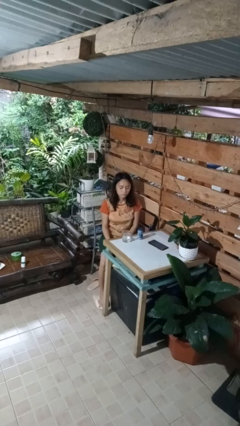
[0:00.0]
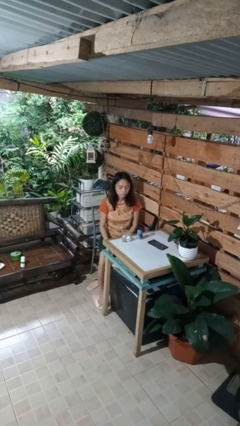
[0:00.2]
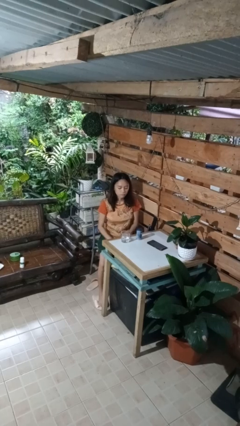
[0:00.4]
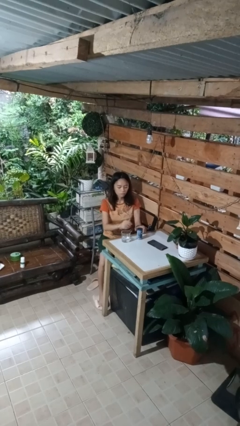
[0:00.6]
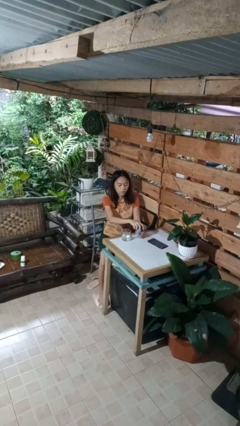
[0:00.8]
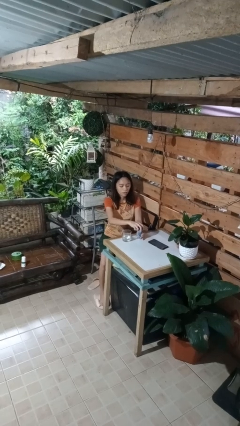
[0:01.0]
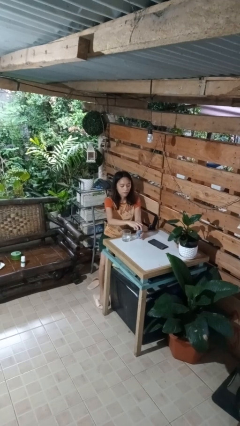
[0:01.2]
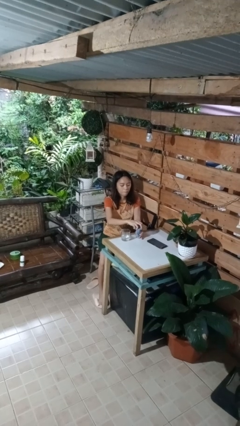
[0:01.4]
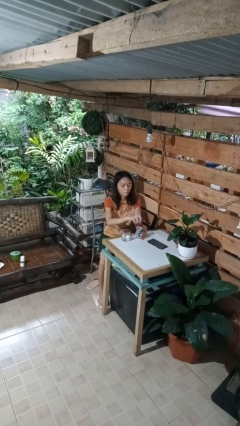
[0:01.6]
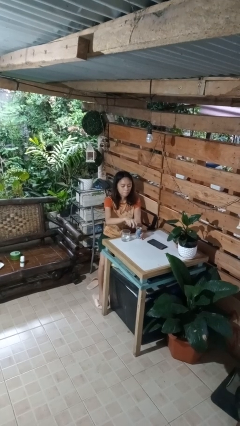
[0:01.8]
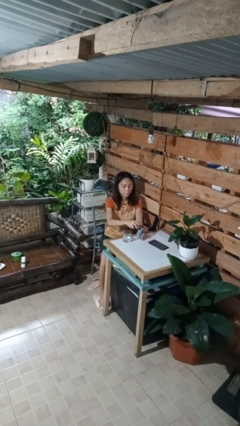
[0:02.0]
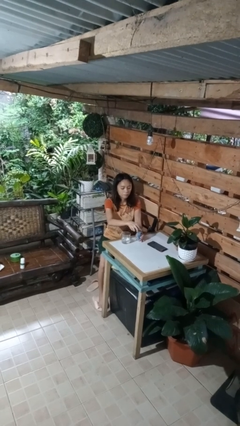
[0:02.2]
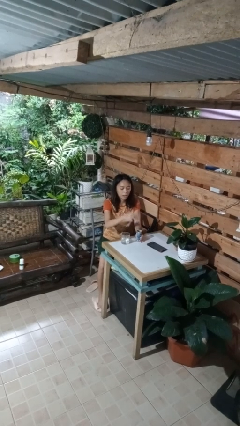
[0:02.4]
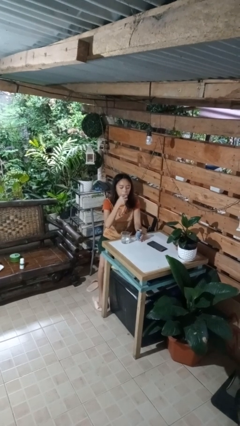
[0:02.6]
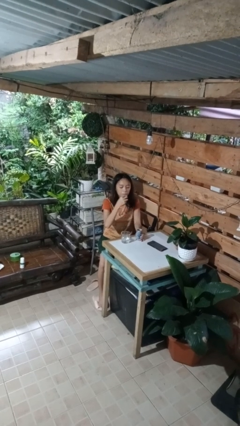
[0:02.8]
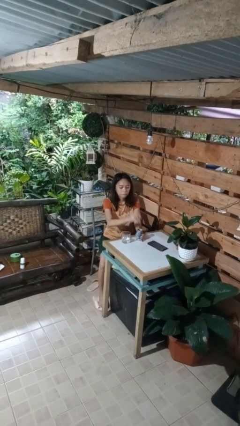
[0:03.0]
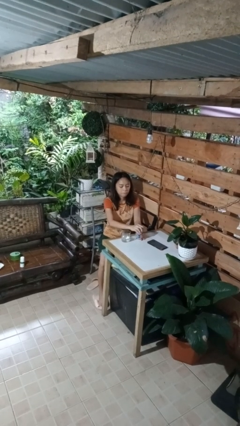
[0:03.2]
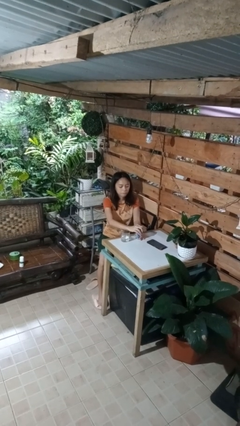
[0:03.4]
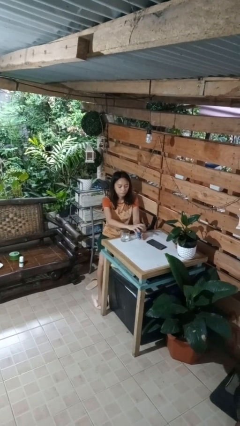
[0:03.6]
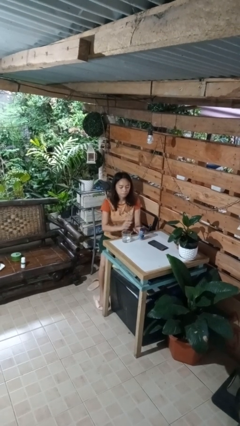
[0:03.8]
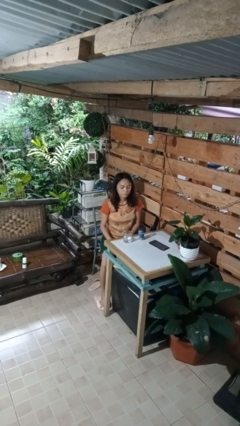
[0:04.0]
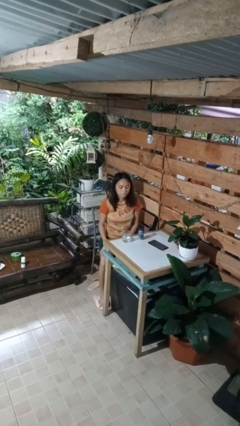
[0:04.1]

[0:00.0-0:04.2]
person takes medicine pills

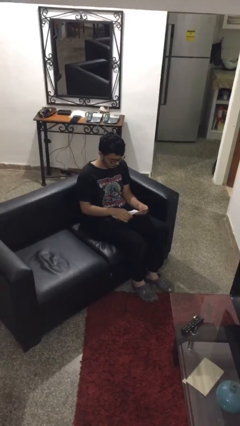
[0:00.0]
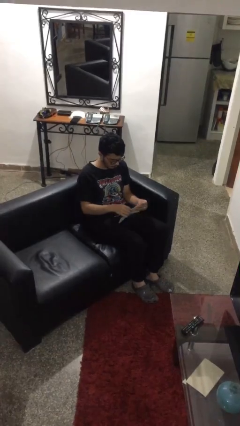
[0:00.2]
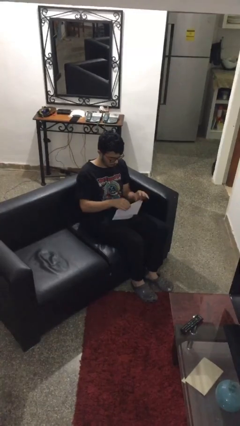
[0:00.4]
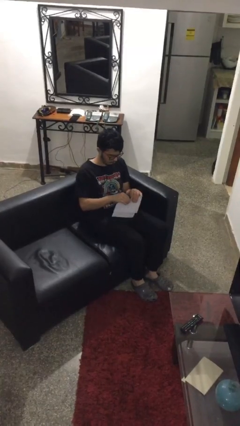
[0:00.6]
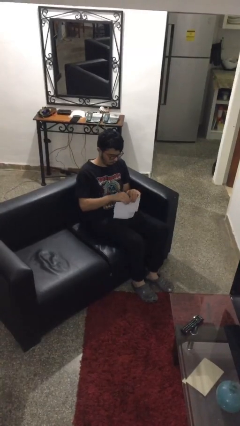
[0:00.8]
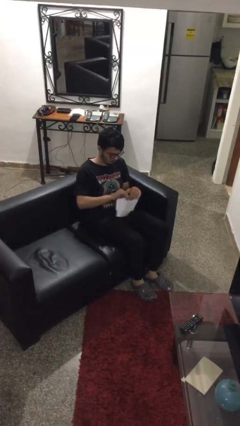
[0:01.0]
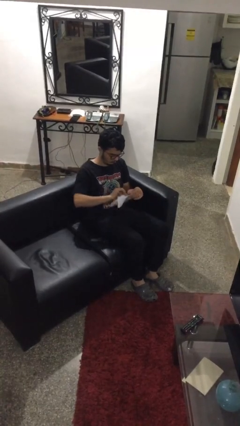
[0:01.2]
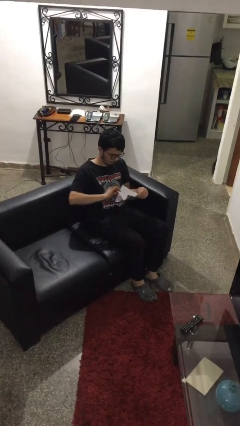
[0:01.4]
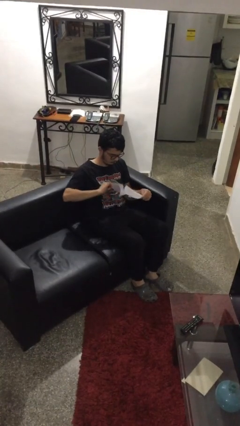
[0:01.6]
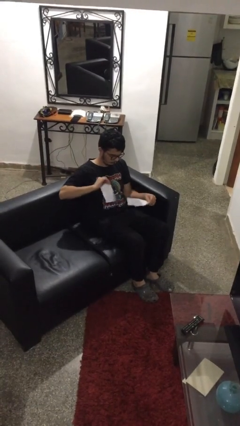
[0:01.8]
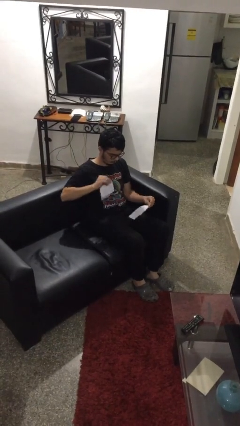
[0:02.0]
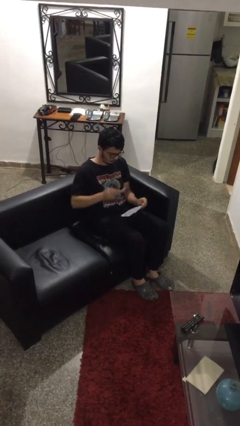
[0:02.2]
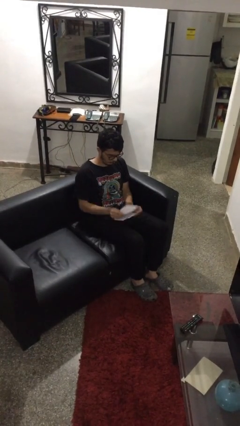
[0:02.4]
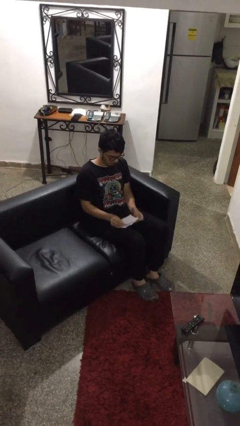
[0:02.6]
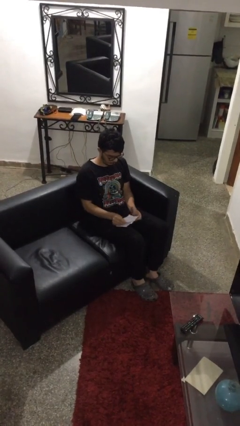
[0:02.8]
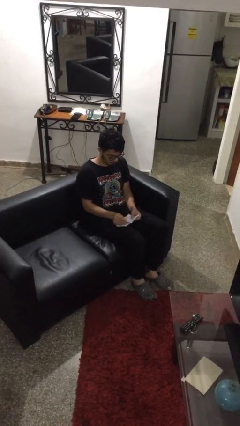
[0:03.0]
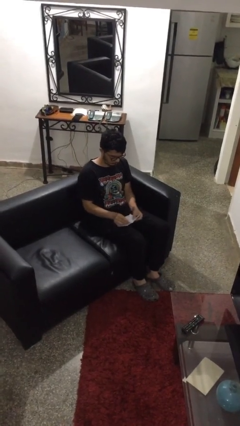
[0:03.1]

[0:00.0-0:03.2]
person tears paper

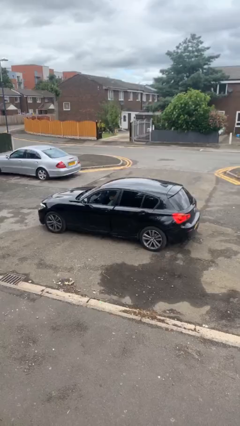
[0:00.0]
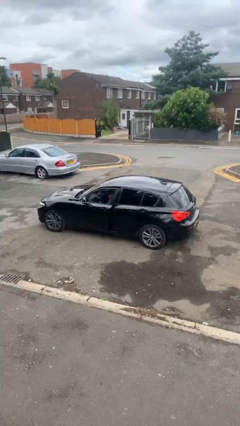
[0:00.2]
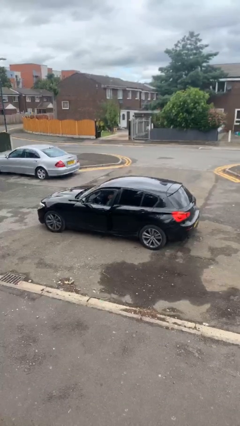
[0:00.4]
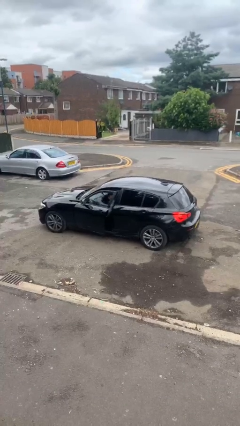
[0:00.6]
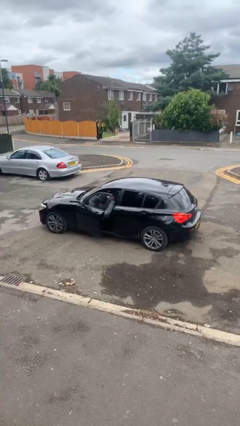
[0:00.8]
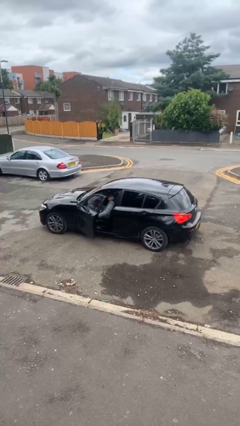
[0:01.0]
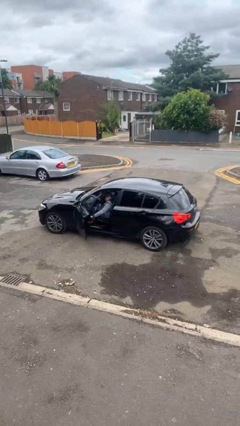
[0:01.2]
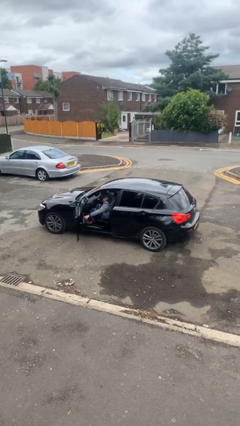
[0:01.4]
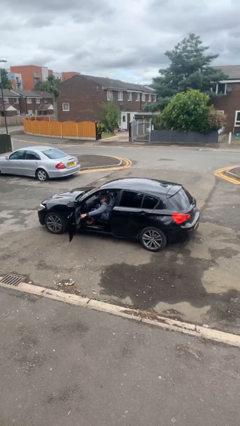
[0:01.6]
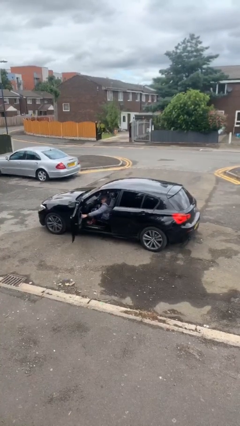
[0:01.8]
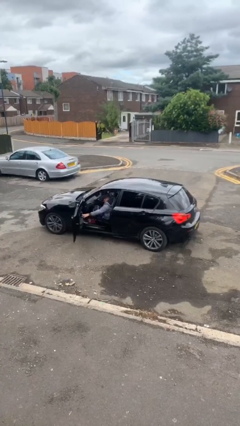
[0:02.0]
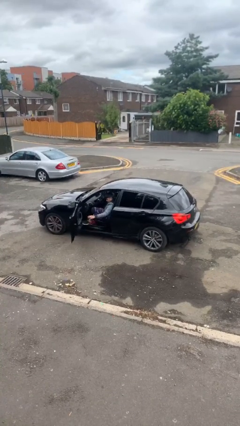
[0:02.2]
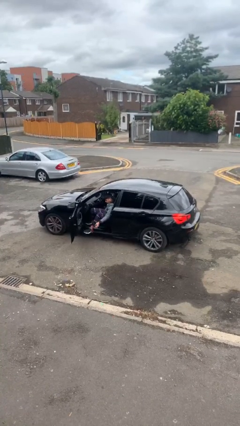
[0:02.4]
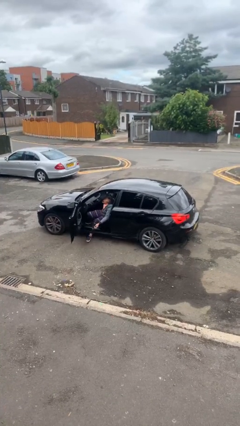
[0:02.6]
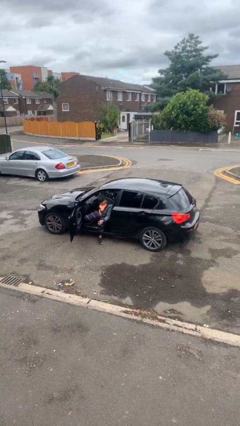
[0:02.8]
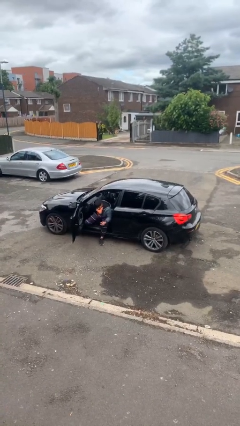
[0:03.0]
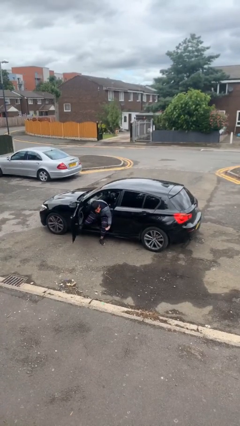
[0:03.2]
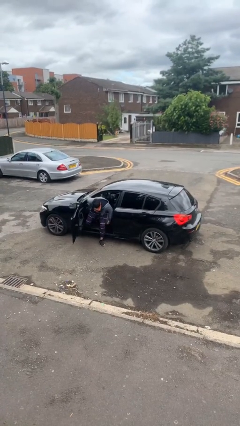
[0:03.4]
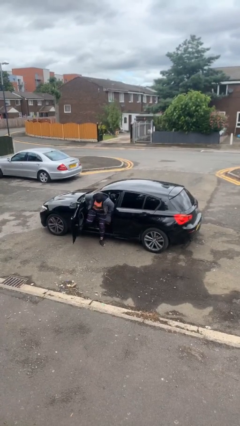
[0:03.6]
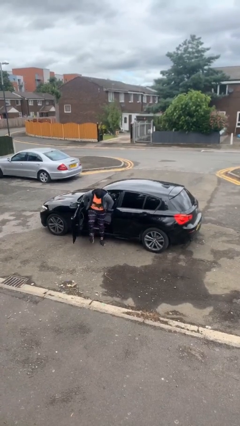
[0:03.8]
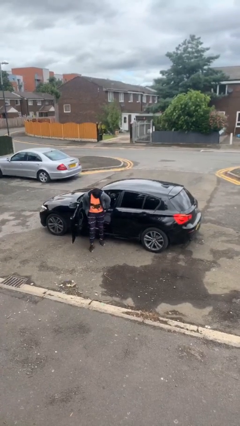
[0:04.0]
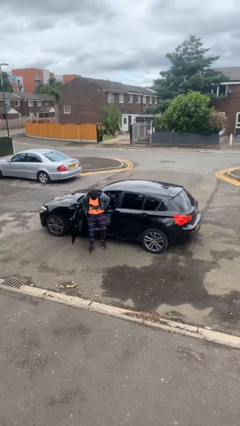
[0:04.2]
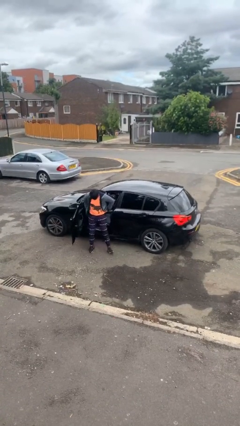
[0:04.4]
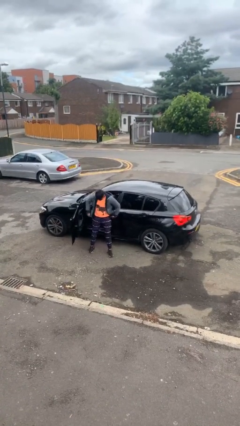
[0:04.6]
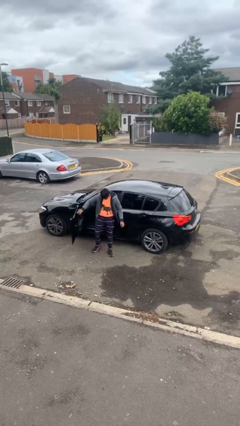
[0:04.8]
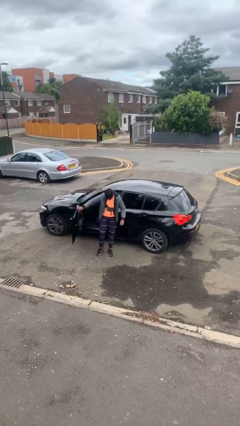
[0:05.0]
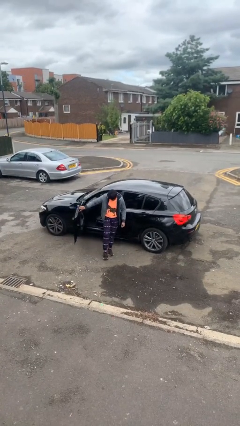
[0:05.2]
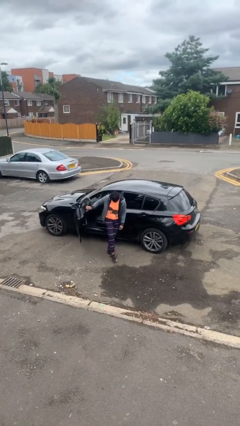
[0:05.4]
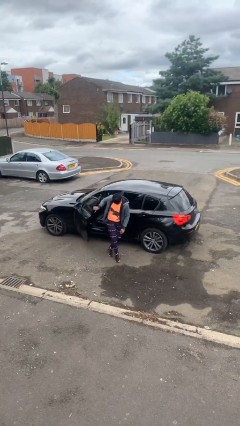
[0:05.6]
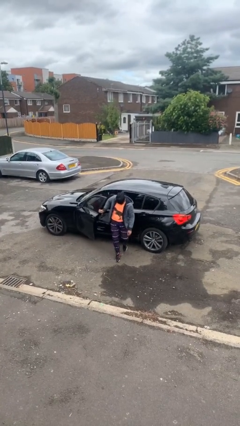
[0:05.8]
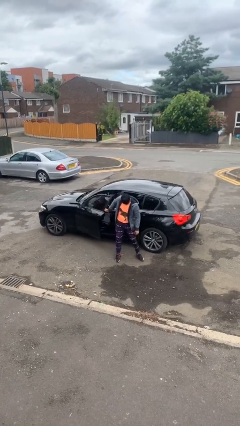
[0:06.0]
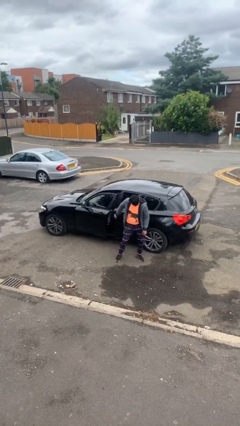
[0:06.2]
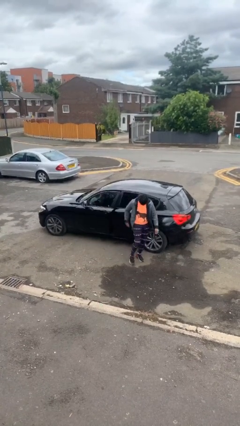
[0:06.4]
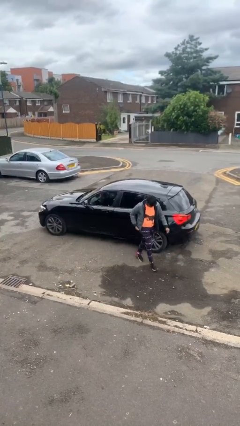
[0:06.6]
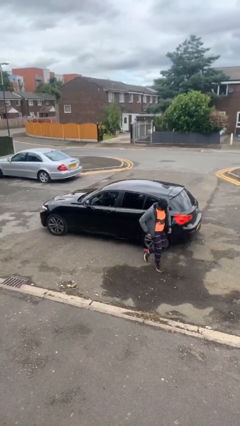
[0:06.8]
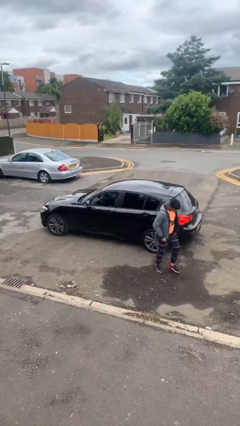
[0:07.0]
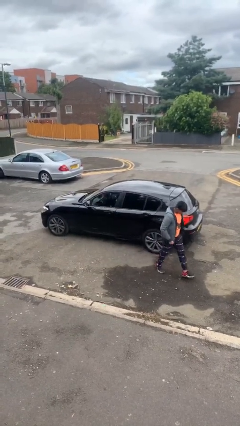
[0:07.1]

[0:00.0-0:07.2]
car drops off person

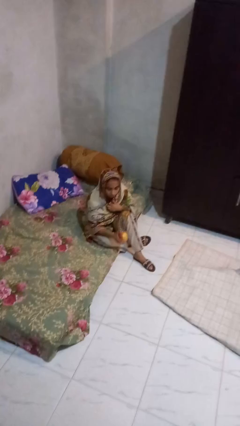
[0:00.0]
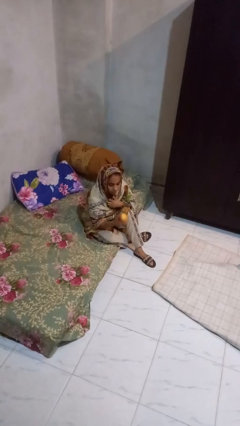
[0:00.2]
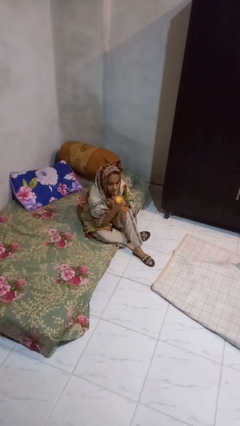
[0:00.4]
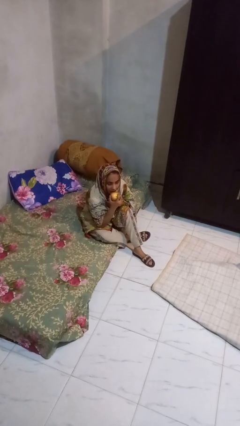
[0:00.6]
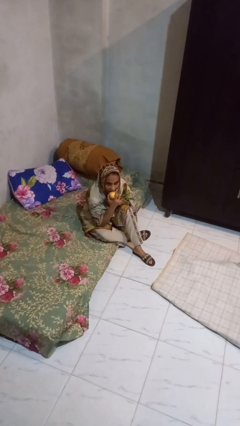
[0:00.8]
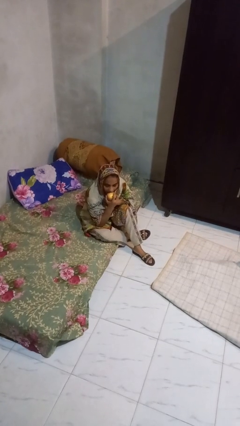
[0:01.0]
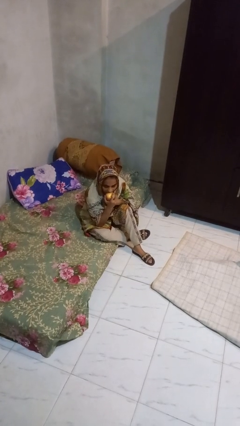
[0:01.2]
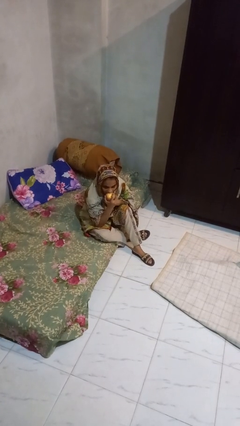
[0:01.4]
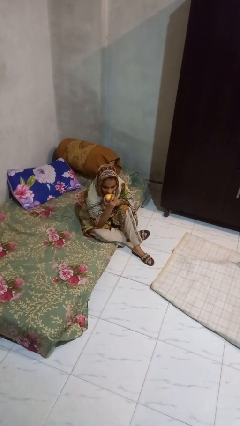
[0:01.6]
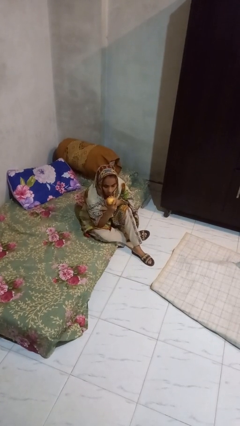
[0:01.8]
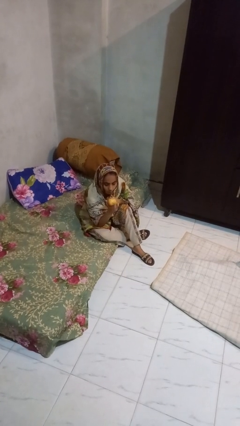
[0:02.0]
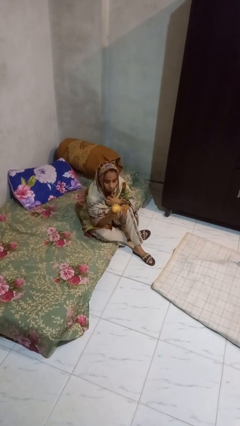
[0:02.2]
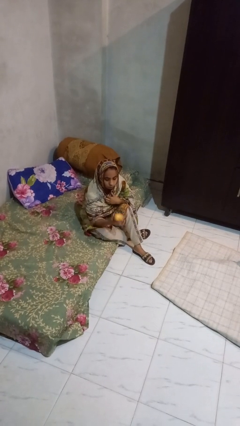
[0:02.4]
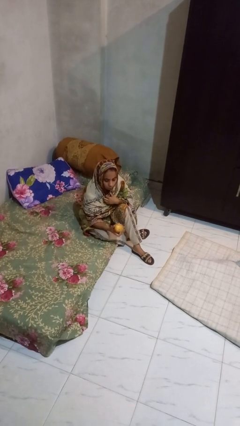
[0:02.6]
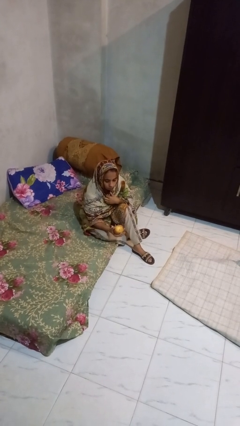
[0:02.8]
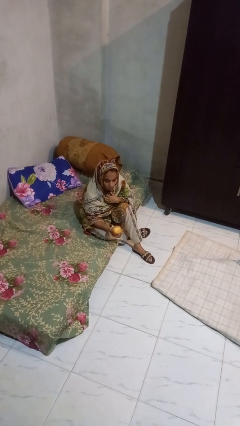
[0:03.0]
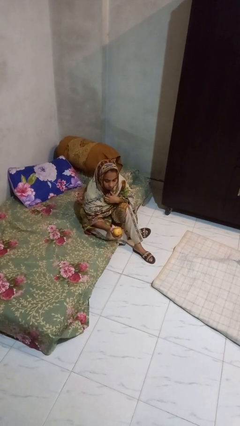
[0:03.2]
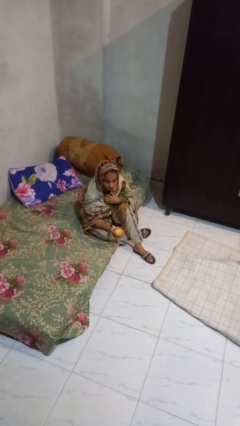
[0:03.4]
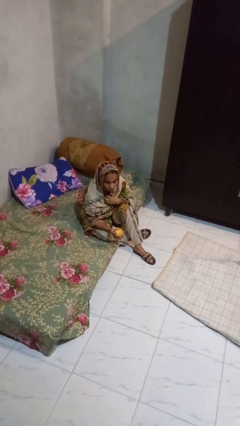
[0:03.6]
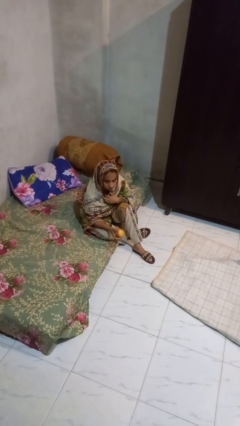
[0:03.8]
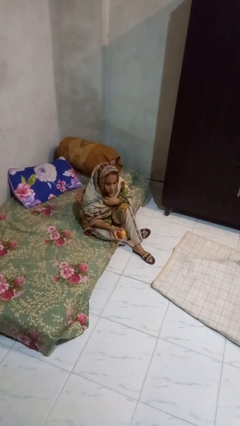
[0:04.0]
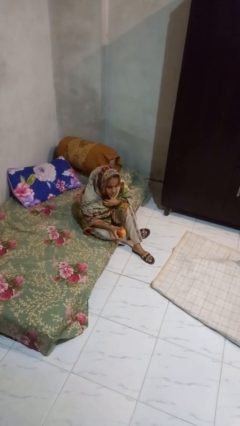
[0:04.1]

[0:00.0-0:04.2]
person eats apple
